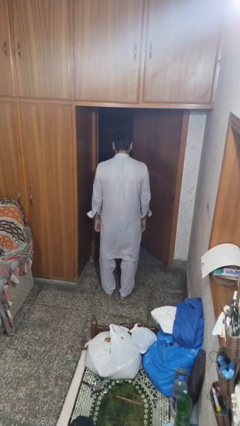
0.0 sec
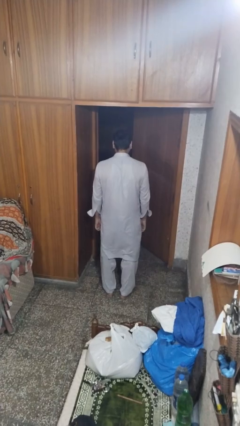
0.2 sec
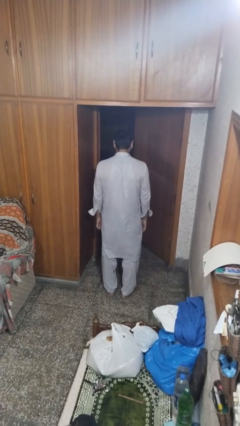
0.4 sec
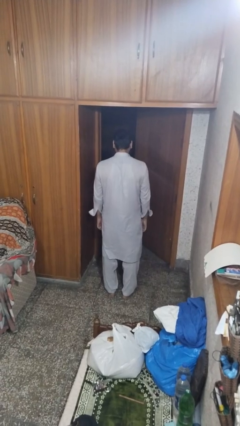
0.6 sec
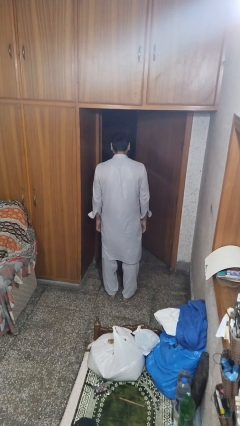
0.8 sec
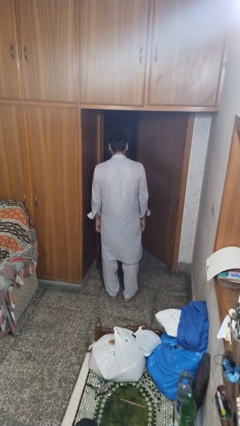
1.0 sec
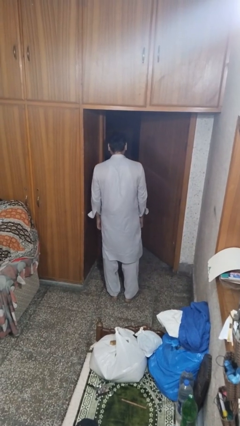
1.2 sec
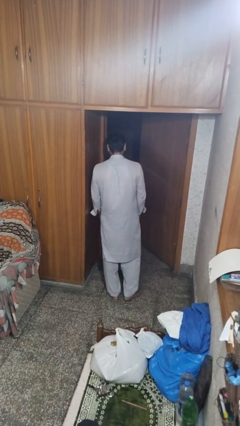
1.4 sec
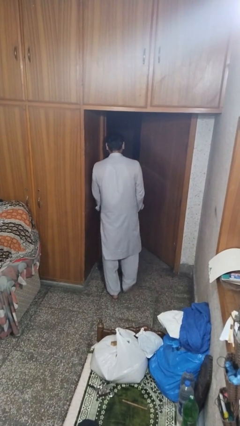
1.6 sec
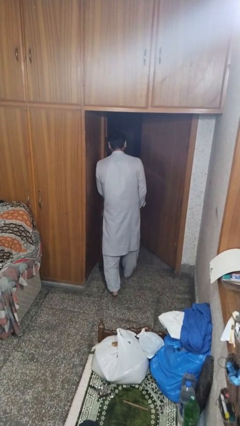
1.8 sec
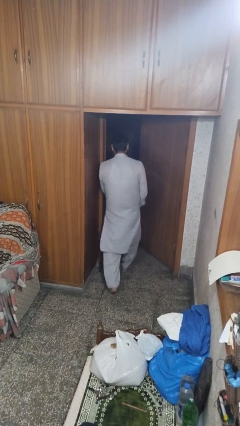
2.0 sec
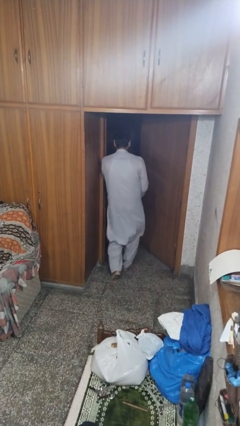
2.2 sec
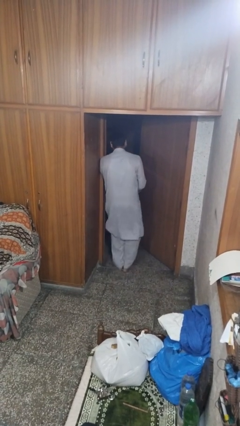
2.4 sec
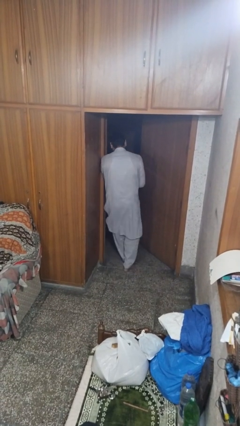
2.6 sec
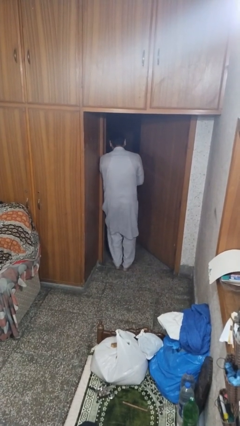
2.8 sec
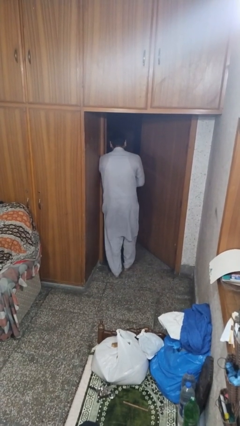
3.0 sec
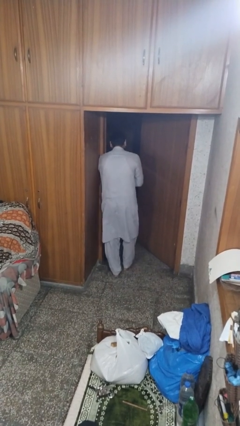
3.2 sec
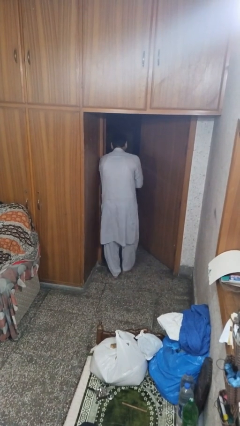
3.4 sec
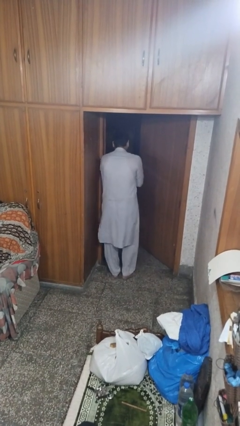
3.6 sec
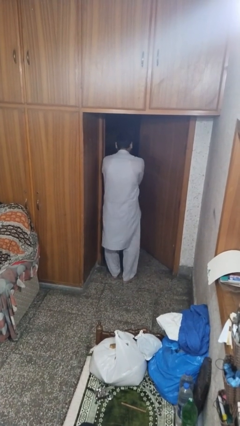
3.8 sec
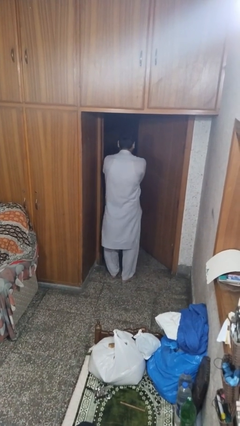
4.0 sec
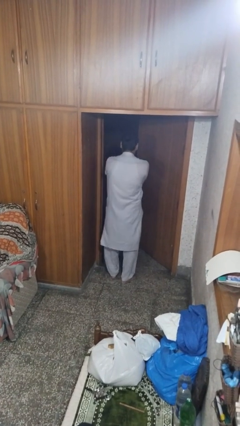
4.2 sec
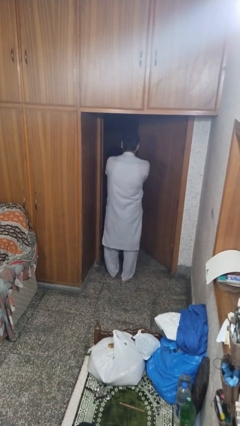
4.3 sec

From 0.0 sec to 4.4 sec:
person bumps into wall

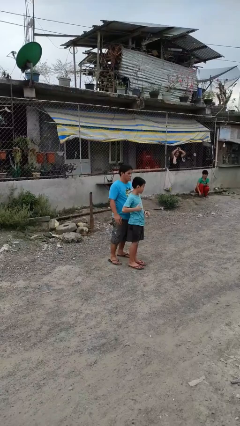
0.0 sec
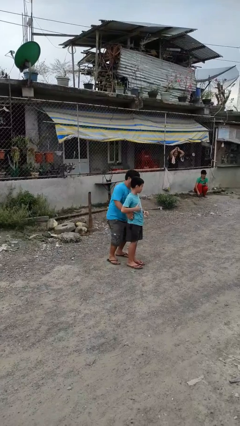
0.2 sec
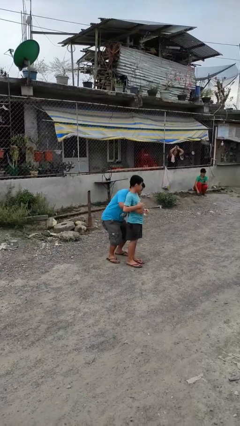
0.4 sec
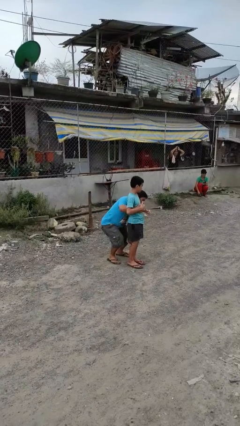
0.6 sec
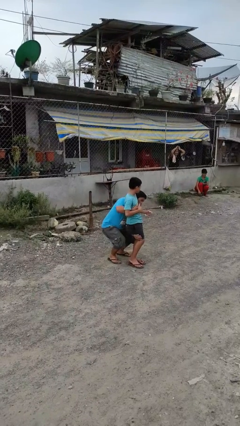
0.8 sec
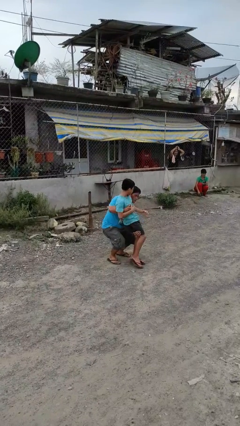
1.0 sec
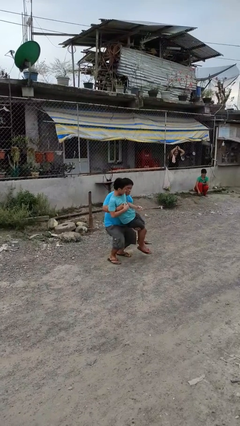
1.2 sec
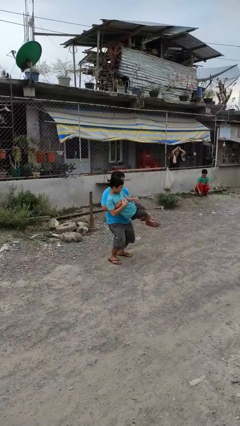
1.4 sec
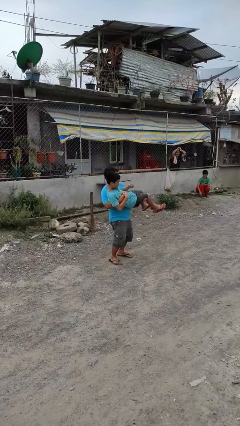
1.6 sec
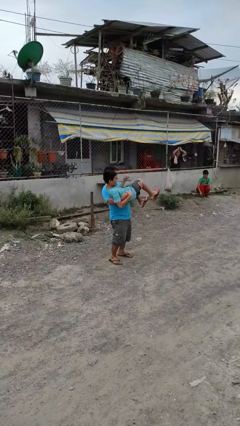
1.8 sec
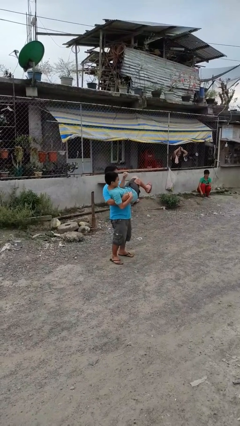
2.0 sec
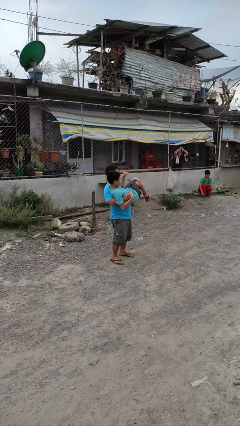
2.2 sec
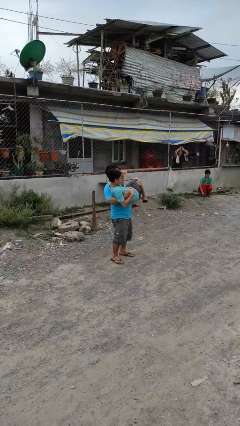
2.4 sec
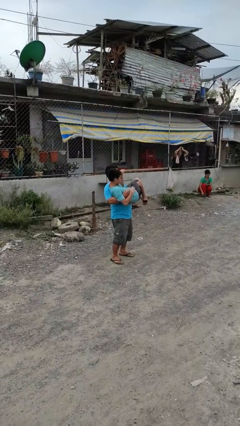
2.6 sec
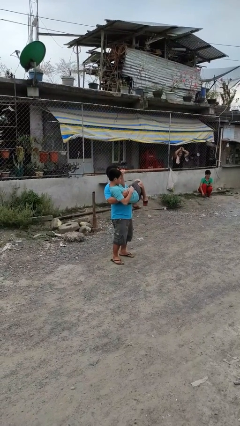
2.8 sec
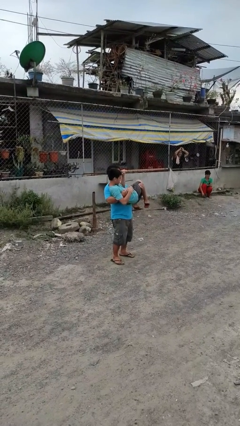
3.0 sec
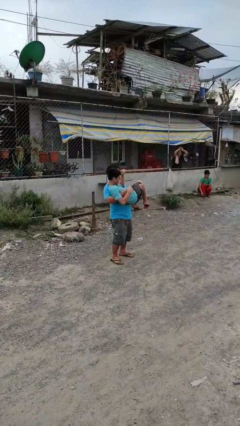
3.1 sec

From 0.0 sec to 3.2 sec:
person picks up person

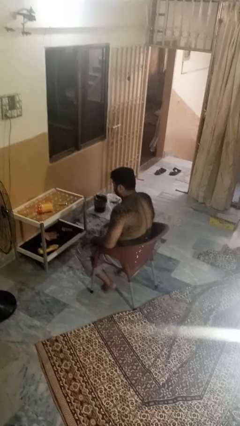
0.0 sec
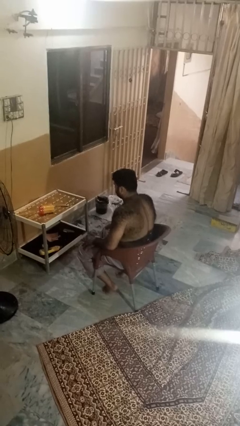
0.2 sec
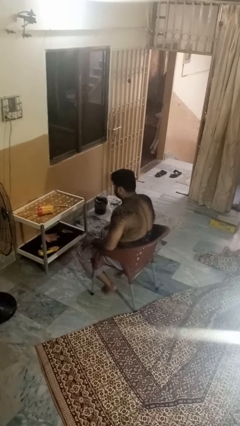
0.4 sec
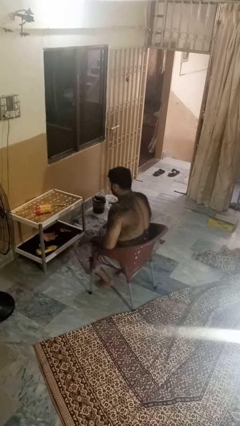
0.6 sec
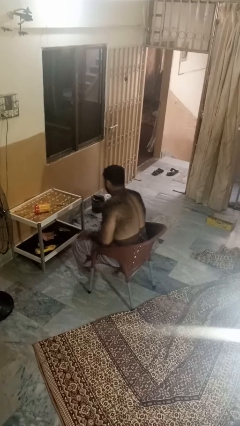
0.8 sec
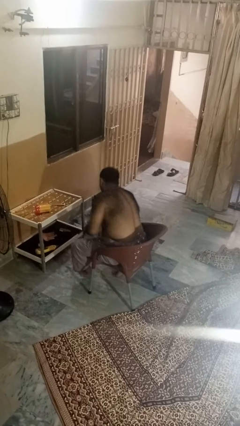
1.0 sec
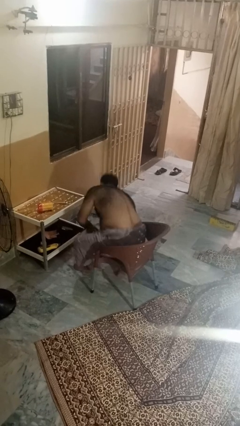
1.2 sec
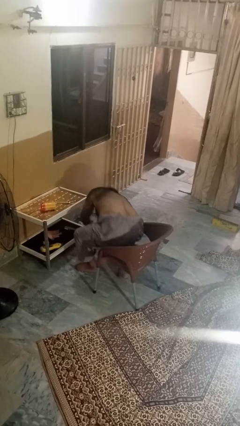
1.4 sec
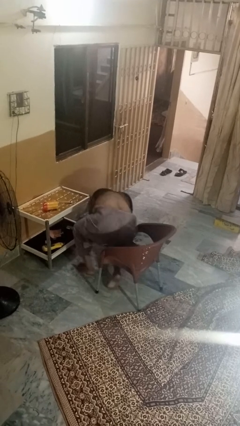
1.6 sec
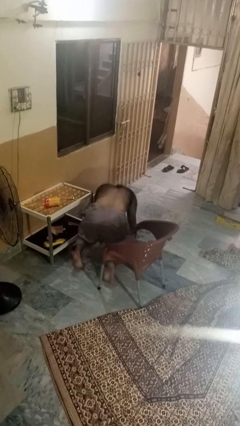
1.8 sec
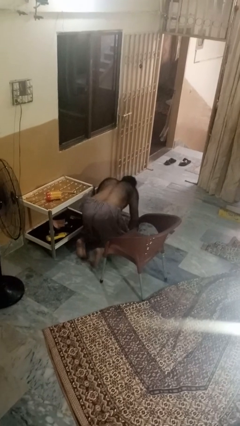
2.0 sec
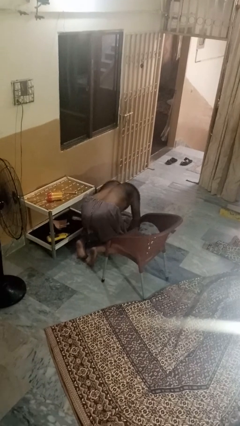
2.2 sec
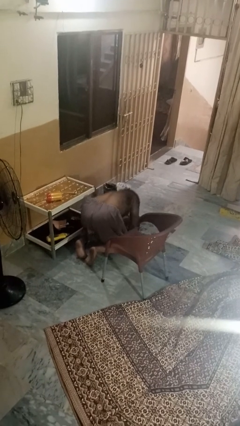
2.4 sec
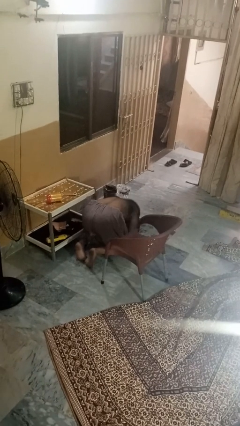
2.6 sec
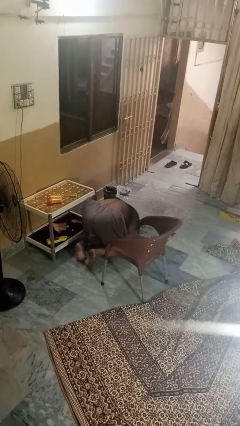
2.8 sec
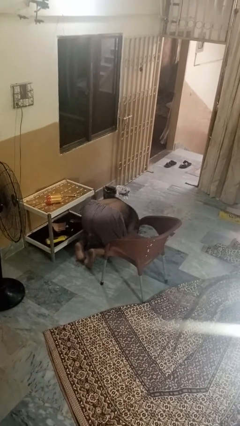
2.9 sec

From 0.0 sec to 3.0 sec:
person falls from chair

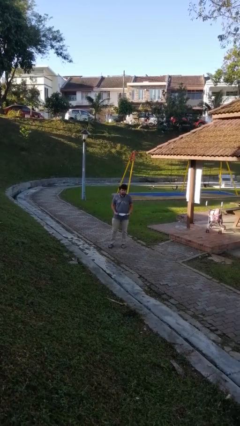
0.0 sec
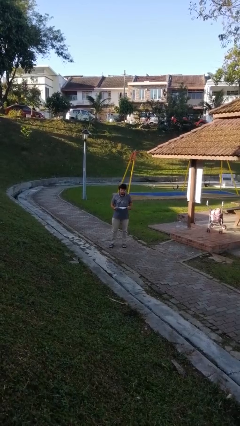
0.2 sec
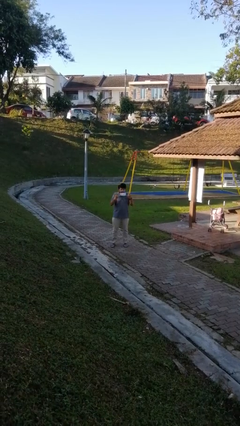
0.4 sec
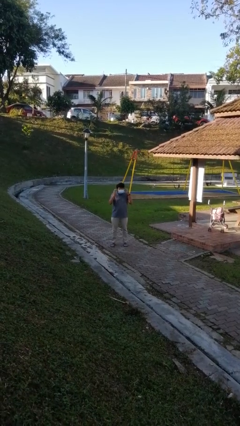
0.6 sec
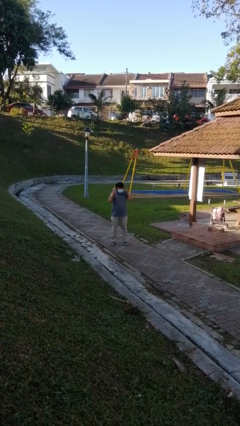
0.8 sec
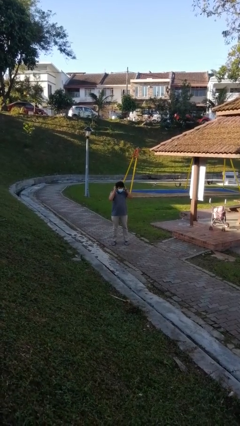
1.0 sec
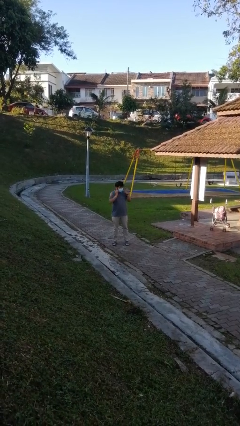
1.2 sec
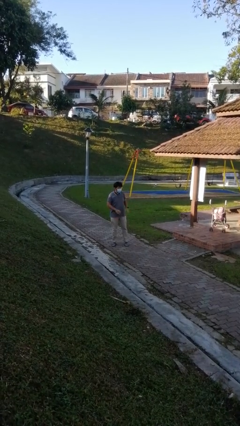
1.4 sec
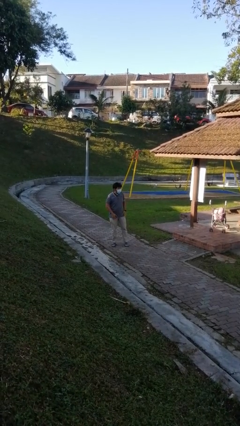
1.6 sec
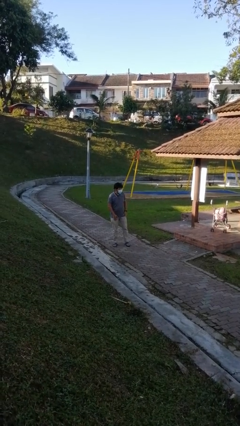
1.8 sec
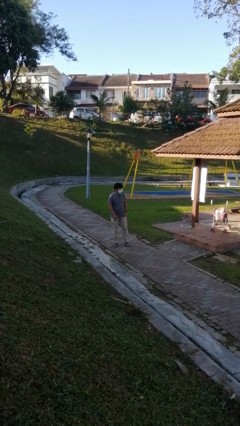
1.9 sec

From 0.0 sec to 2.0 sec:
person puts on facemask

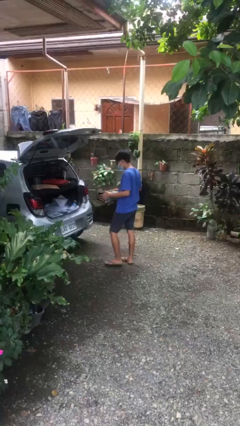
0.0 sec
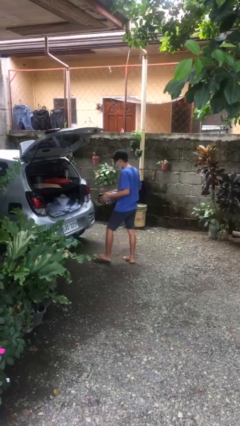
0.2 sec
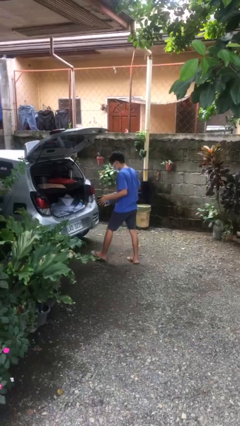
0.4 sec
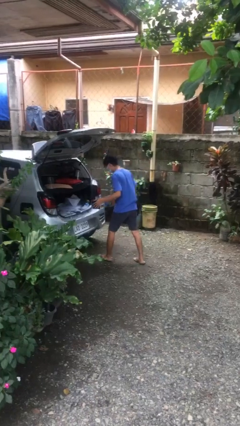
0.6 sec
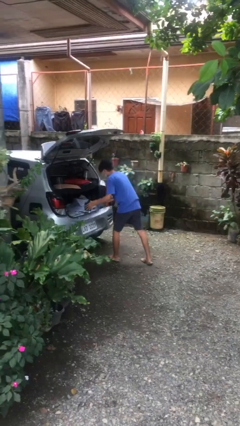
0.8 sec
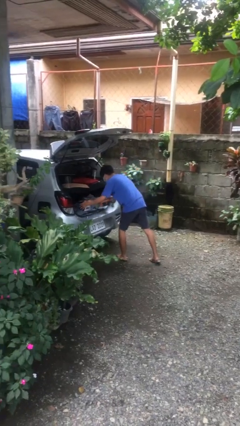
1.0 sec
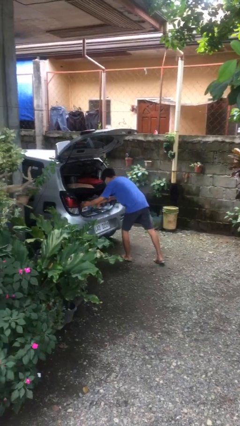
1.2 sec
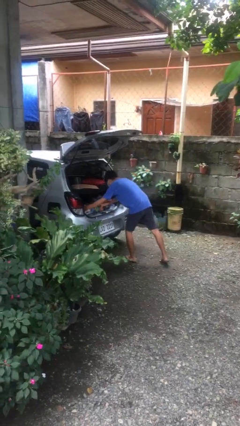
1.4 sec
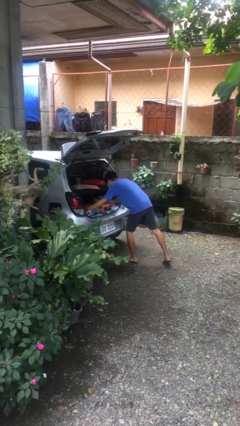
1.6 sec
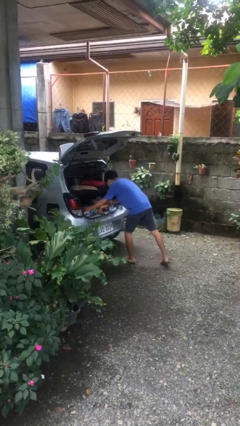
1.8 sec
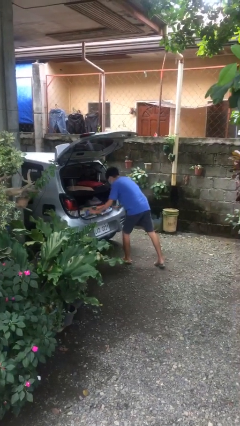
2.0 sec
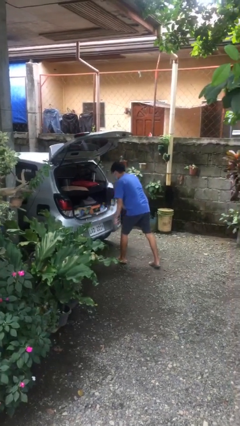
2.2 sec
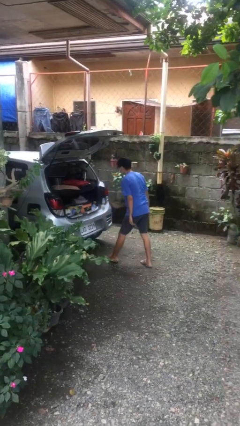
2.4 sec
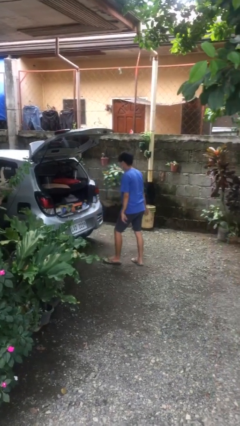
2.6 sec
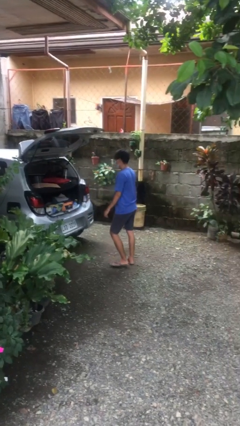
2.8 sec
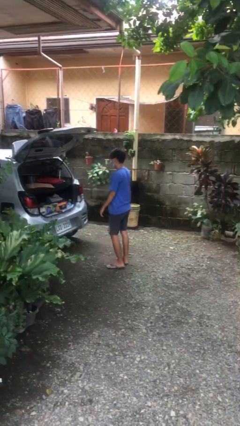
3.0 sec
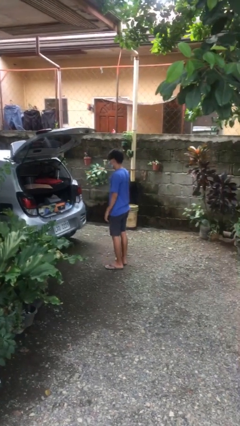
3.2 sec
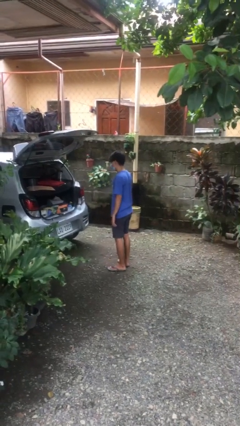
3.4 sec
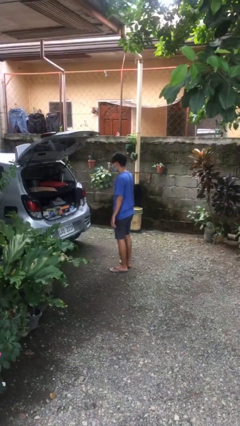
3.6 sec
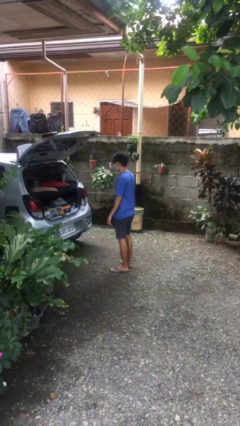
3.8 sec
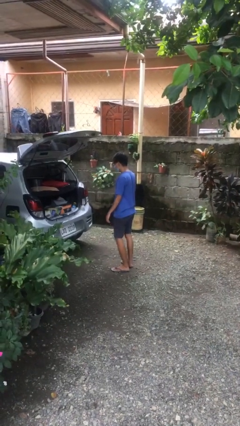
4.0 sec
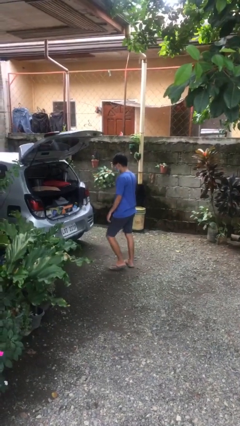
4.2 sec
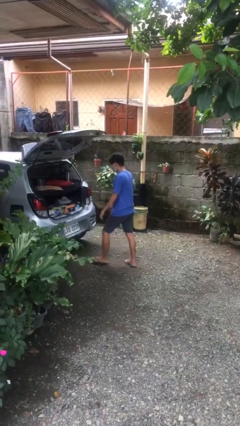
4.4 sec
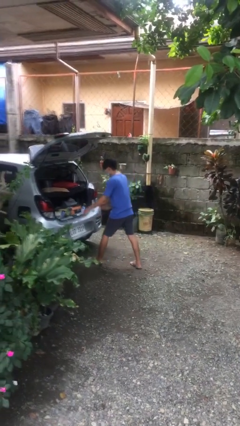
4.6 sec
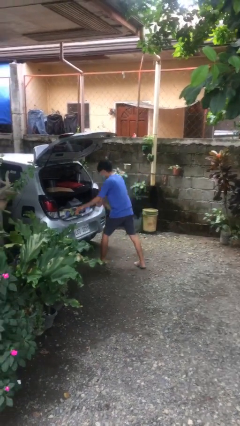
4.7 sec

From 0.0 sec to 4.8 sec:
person loads car

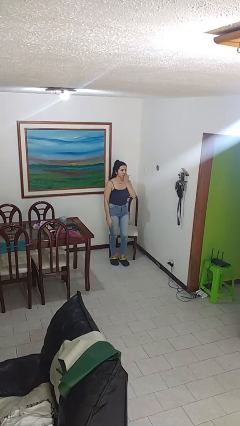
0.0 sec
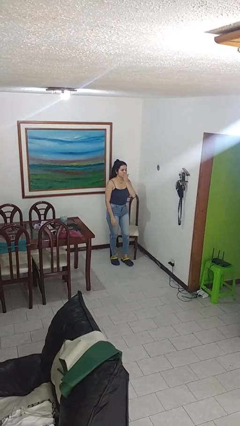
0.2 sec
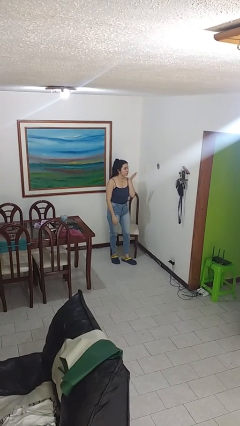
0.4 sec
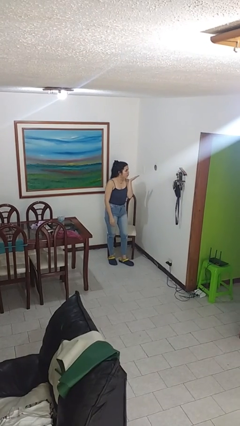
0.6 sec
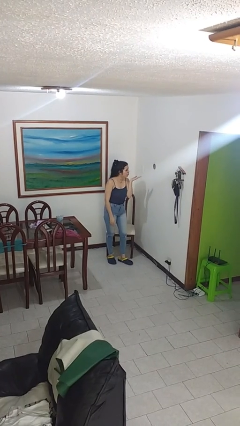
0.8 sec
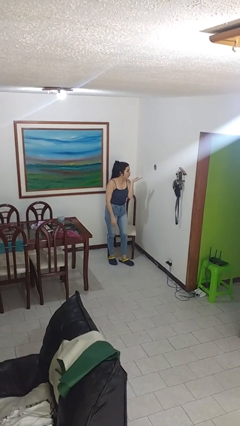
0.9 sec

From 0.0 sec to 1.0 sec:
person gestures blow kiss
